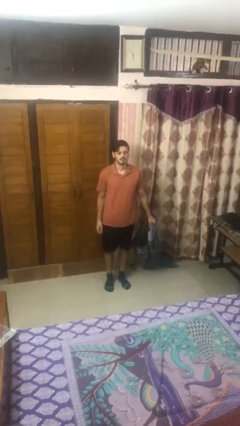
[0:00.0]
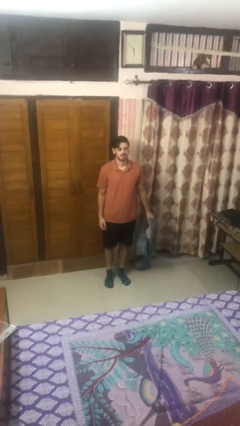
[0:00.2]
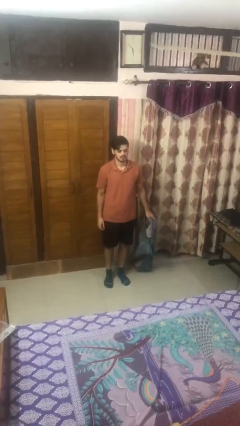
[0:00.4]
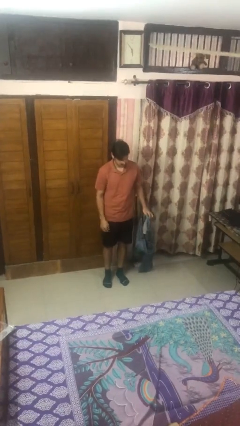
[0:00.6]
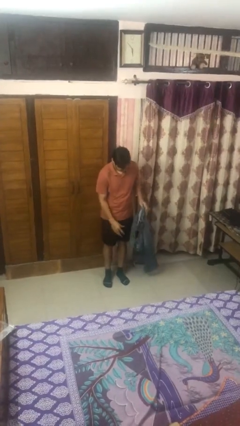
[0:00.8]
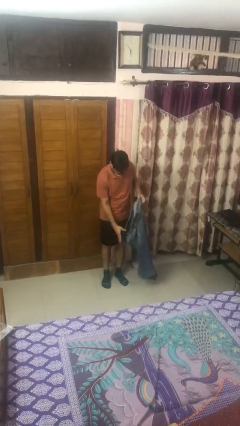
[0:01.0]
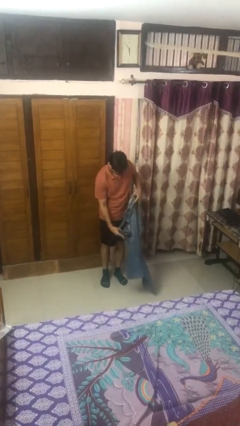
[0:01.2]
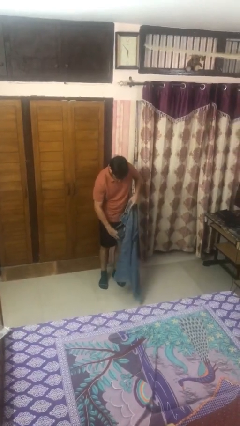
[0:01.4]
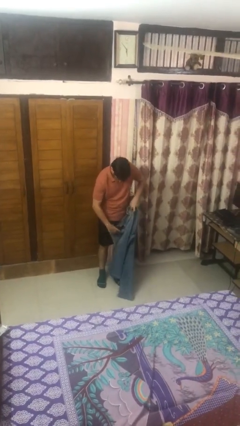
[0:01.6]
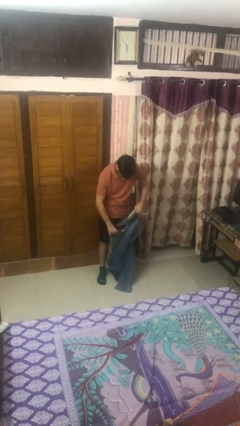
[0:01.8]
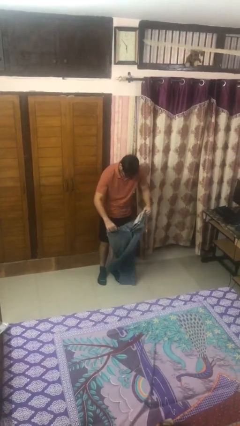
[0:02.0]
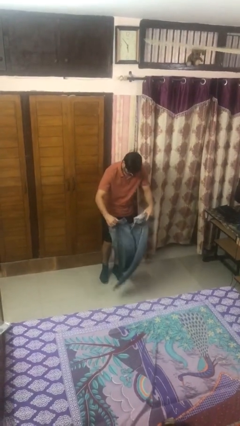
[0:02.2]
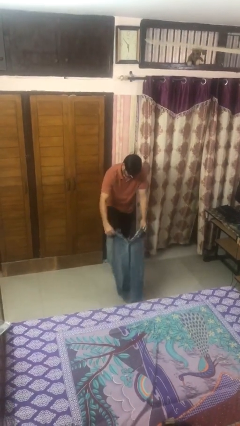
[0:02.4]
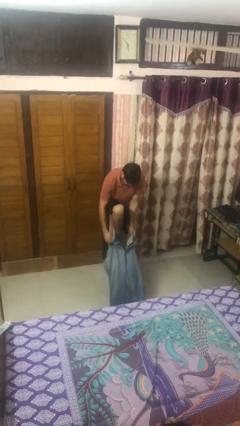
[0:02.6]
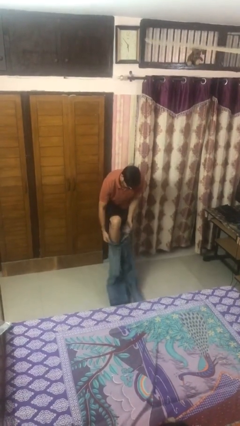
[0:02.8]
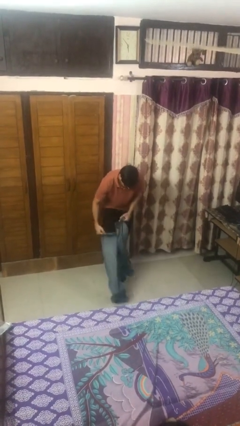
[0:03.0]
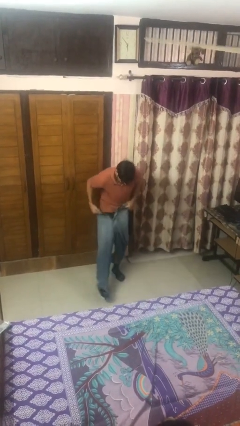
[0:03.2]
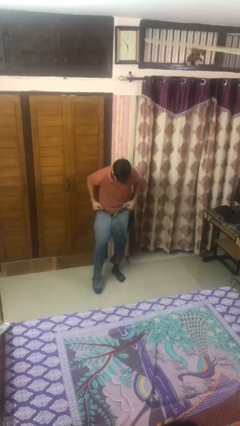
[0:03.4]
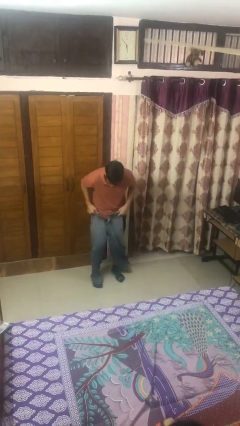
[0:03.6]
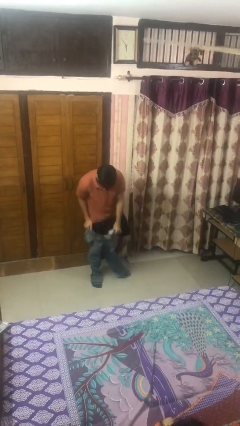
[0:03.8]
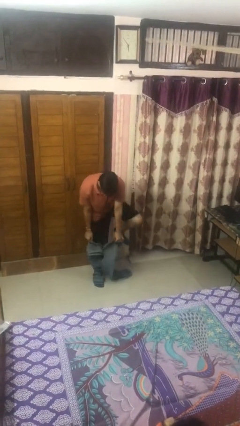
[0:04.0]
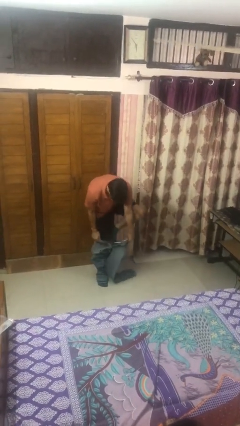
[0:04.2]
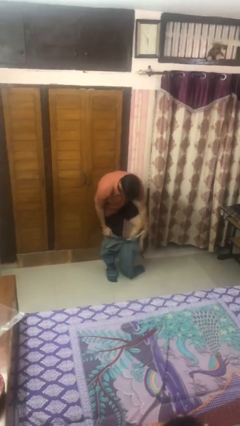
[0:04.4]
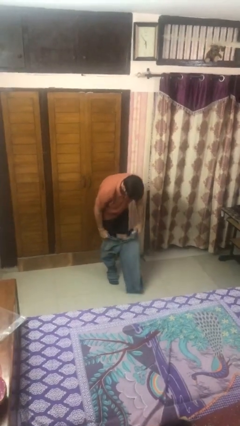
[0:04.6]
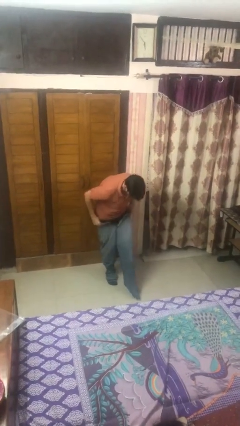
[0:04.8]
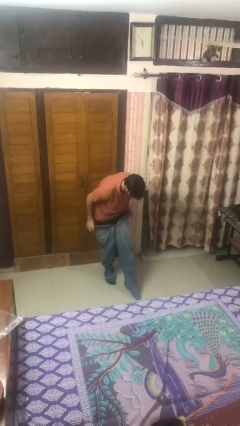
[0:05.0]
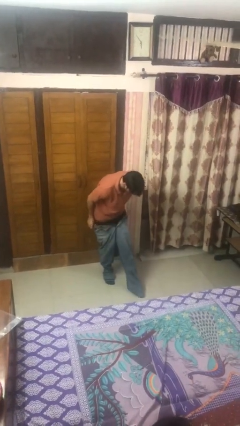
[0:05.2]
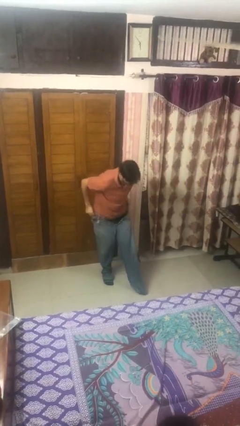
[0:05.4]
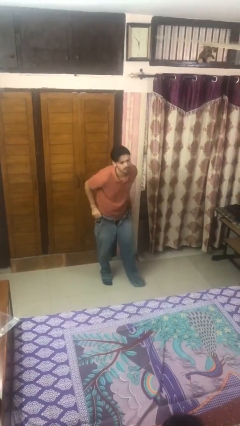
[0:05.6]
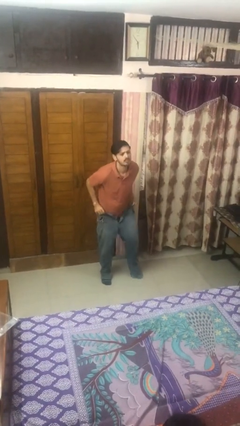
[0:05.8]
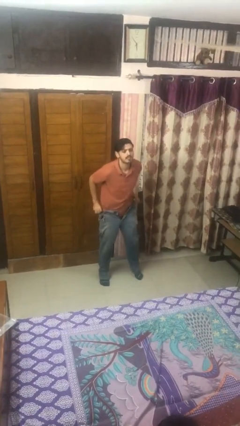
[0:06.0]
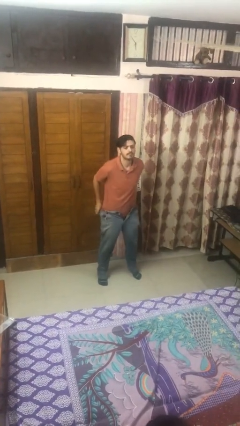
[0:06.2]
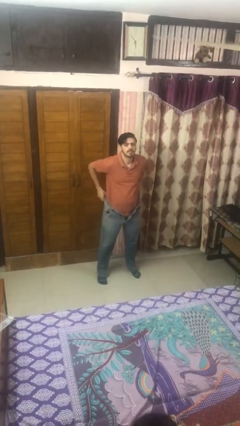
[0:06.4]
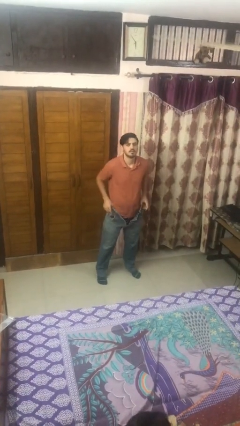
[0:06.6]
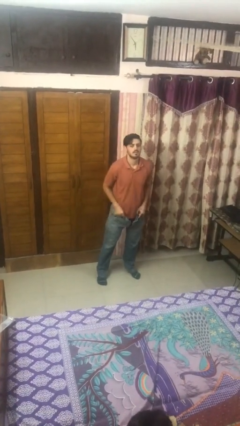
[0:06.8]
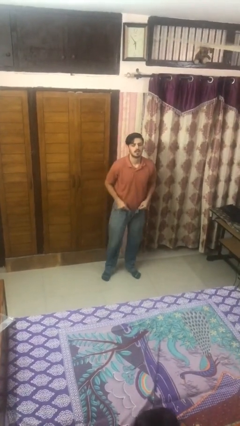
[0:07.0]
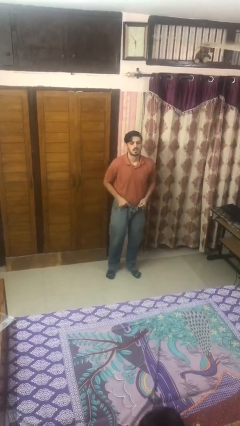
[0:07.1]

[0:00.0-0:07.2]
person puts on pants

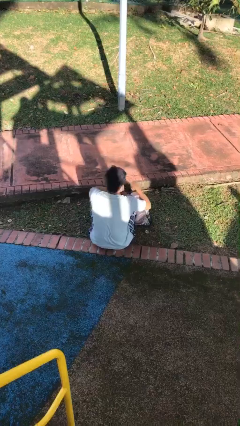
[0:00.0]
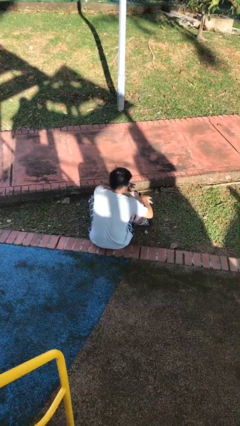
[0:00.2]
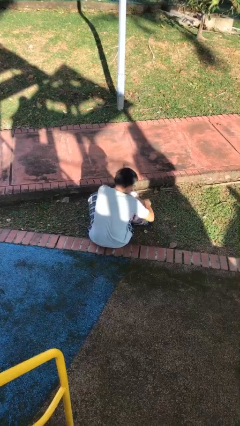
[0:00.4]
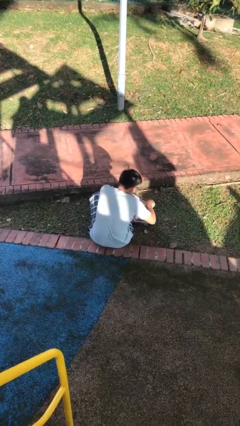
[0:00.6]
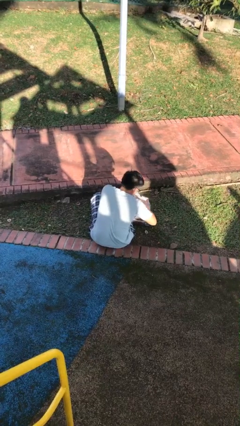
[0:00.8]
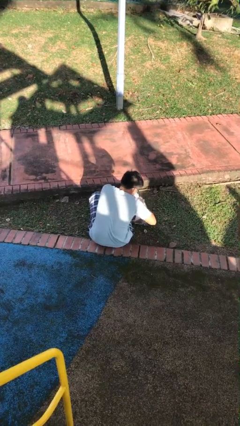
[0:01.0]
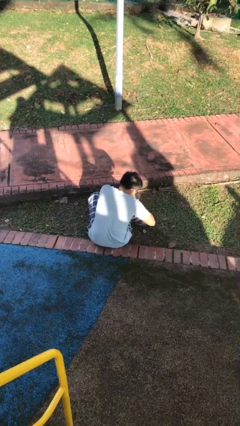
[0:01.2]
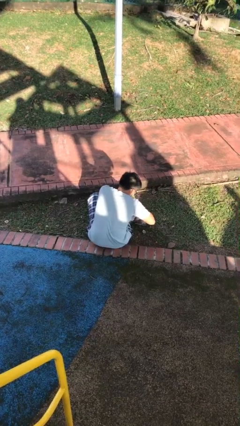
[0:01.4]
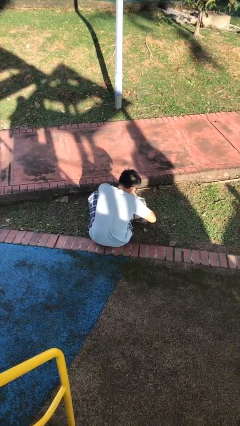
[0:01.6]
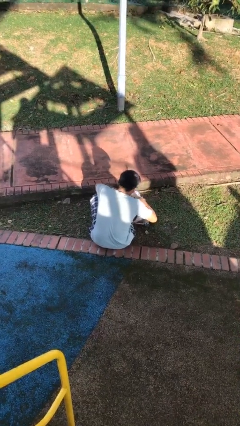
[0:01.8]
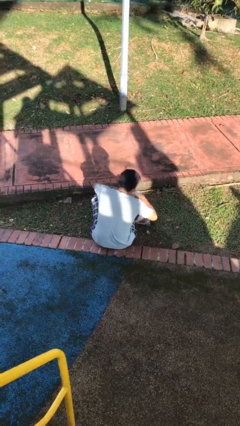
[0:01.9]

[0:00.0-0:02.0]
person searches in bag

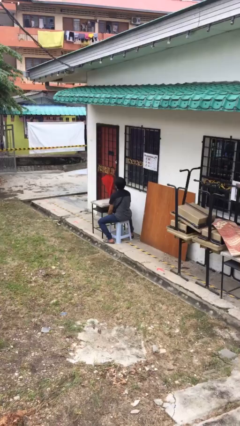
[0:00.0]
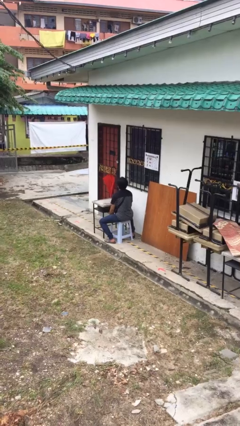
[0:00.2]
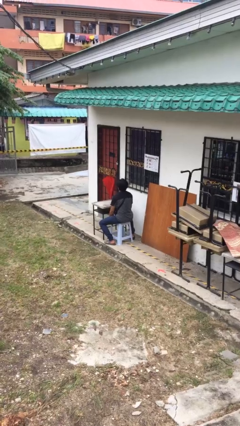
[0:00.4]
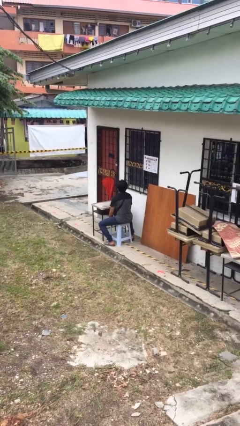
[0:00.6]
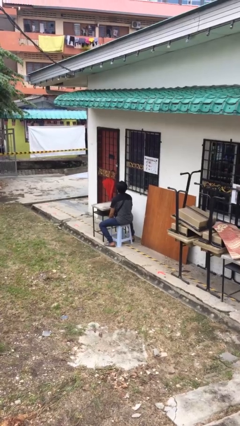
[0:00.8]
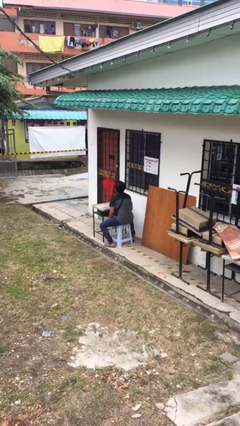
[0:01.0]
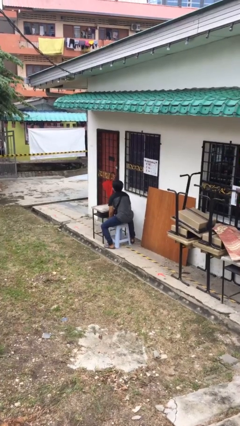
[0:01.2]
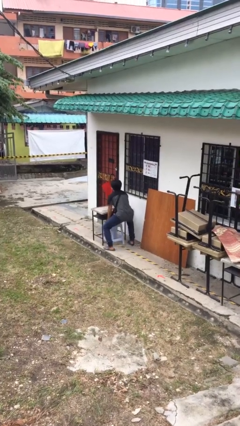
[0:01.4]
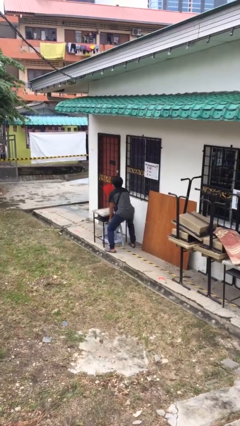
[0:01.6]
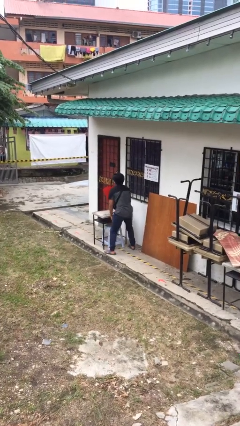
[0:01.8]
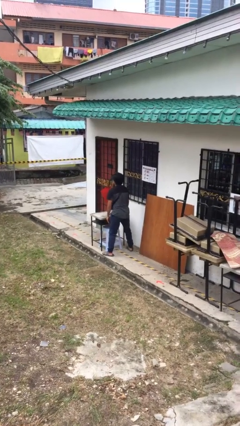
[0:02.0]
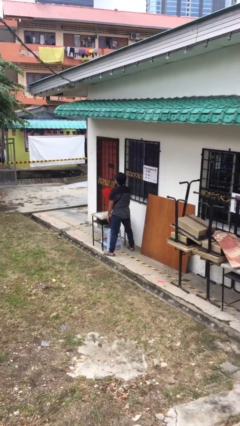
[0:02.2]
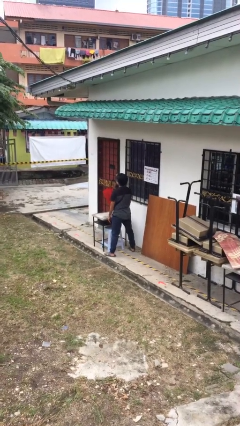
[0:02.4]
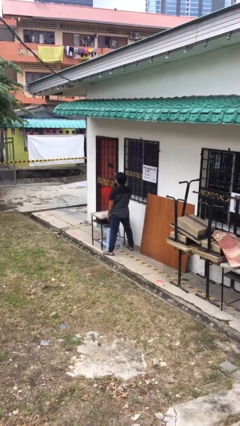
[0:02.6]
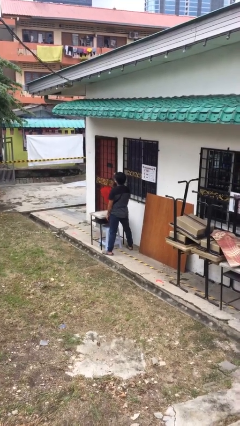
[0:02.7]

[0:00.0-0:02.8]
person stands up

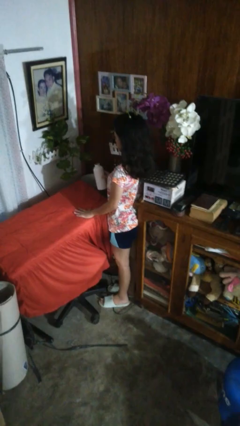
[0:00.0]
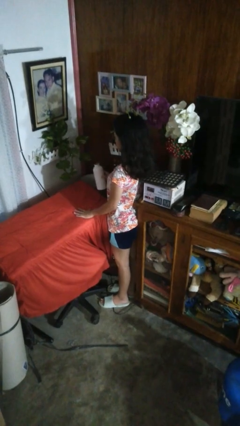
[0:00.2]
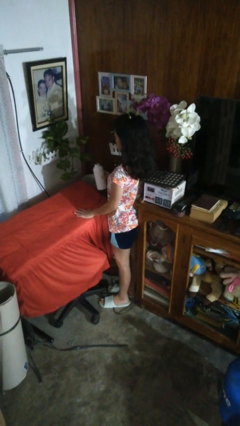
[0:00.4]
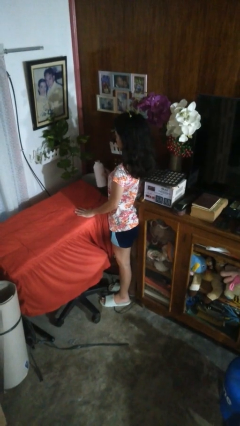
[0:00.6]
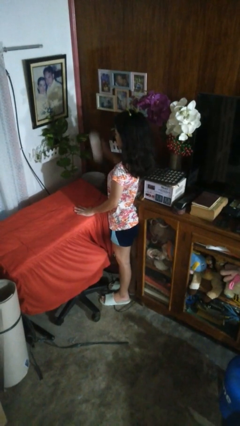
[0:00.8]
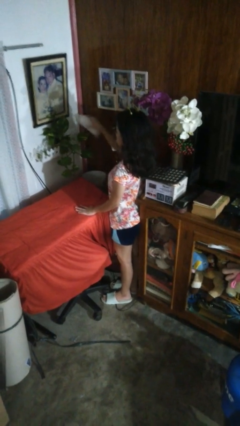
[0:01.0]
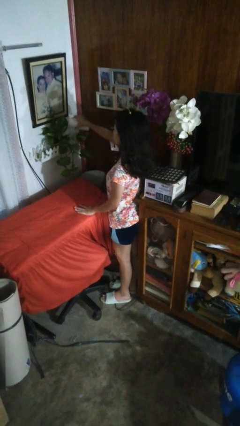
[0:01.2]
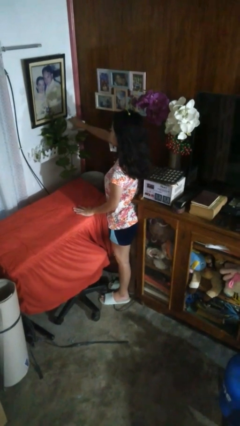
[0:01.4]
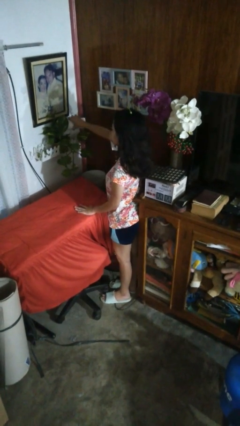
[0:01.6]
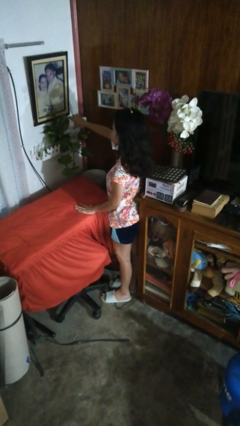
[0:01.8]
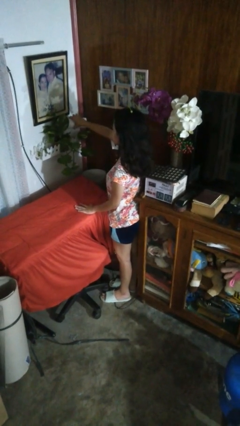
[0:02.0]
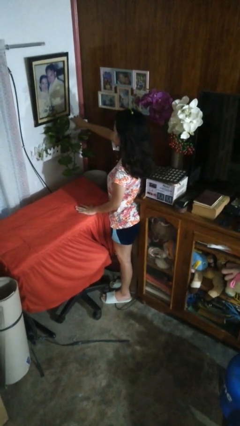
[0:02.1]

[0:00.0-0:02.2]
person waters houseplant

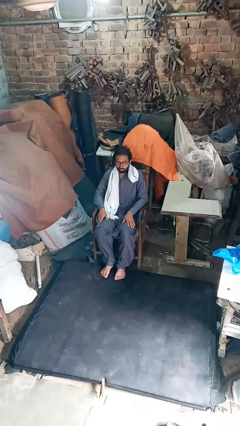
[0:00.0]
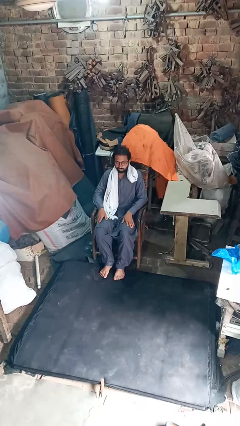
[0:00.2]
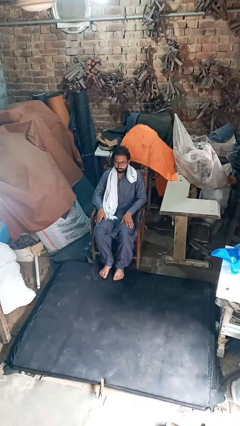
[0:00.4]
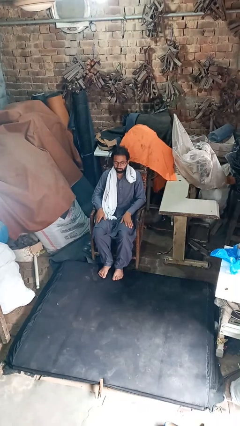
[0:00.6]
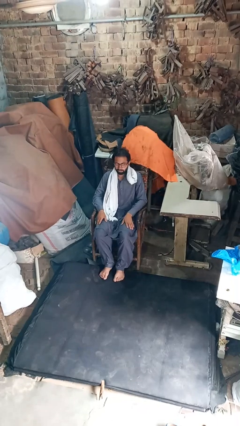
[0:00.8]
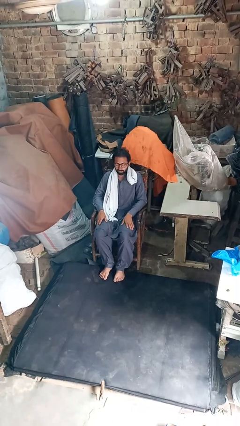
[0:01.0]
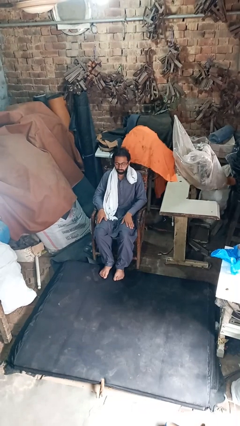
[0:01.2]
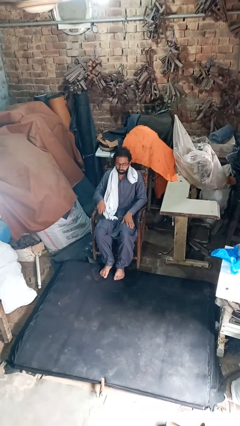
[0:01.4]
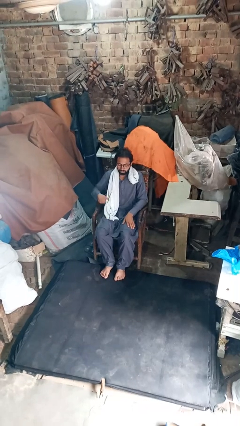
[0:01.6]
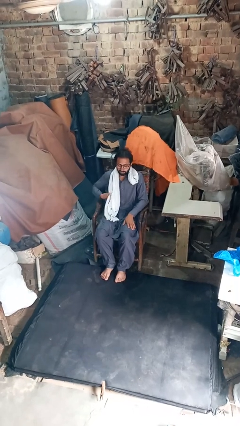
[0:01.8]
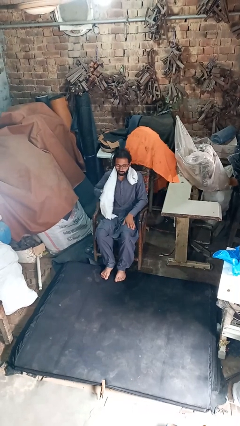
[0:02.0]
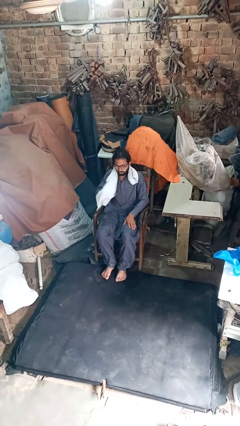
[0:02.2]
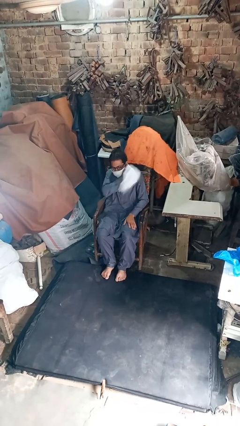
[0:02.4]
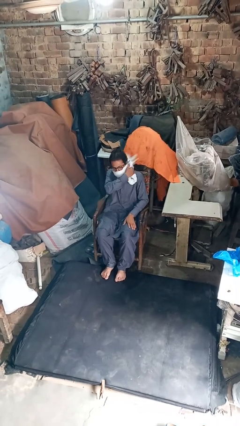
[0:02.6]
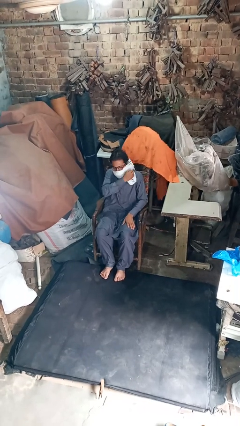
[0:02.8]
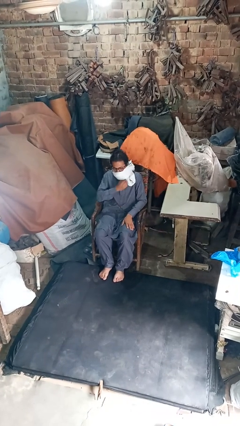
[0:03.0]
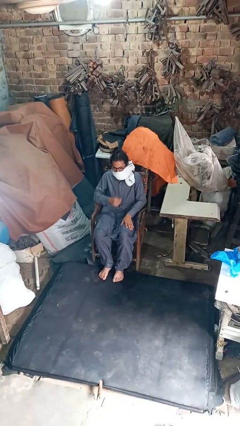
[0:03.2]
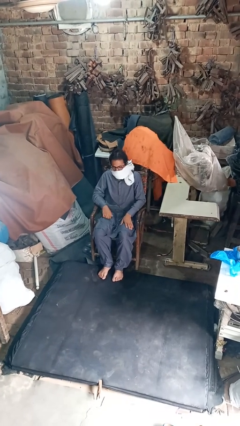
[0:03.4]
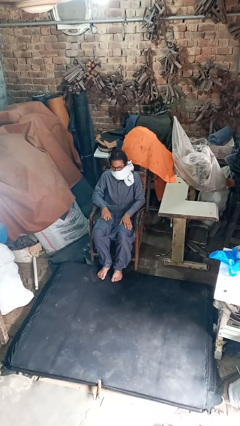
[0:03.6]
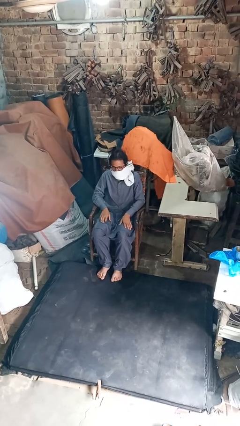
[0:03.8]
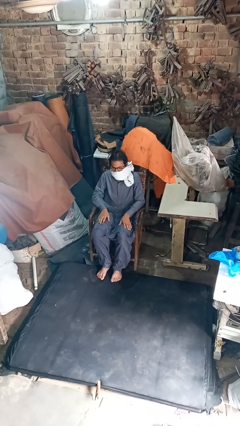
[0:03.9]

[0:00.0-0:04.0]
person puts on scarf
